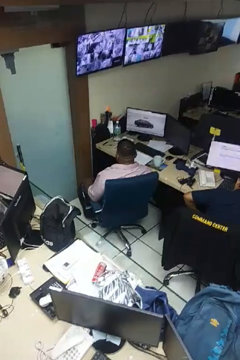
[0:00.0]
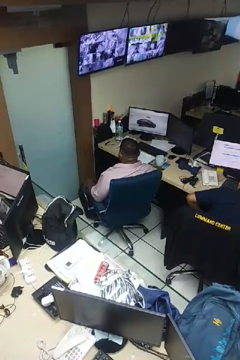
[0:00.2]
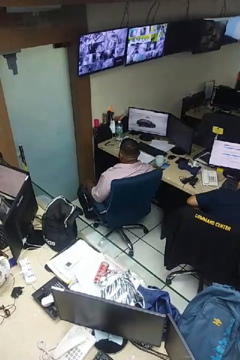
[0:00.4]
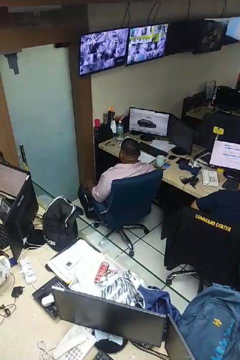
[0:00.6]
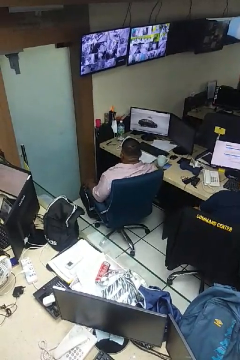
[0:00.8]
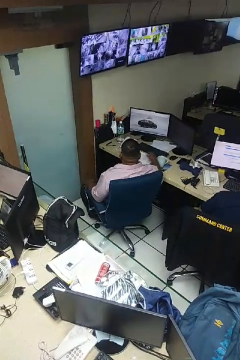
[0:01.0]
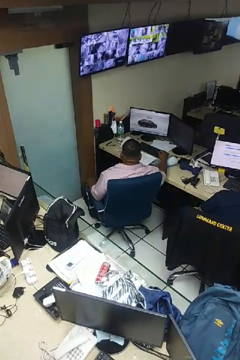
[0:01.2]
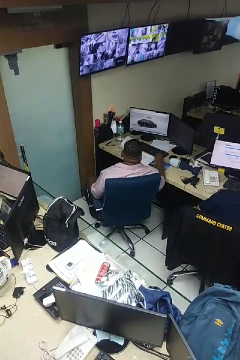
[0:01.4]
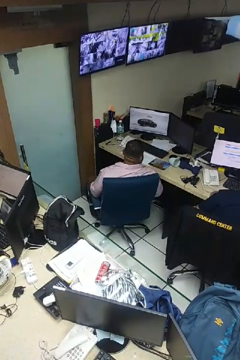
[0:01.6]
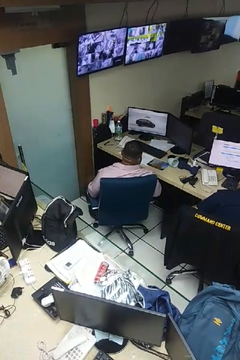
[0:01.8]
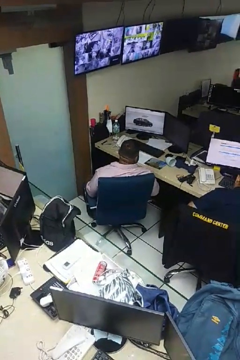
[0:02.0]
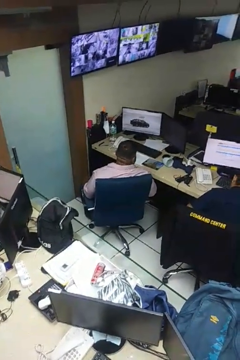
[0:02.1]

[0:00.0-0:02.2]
person knocks over glass

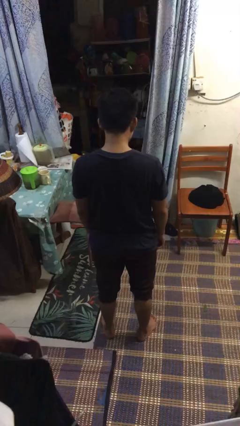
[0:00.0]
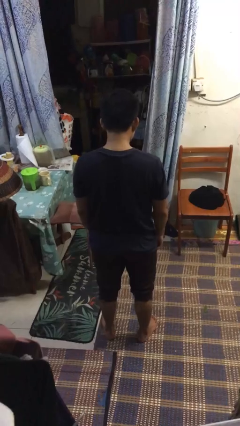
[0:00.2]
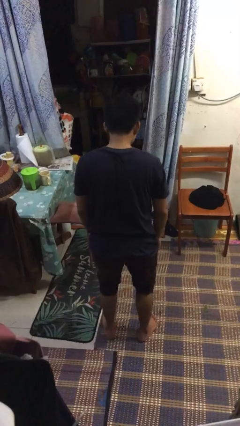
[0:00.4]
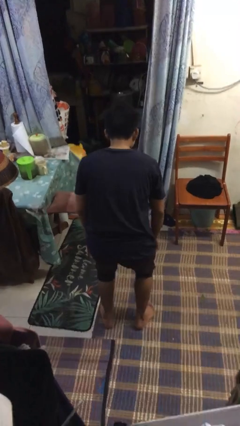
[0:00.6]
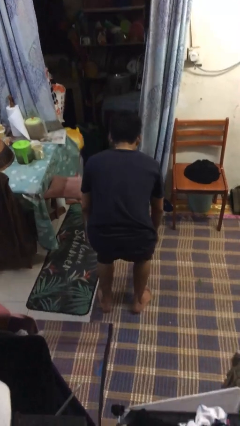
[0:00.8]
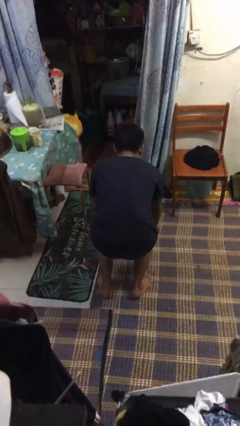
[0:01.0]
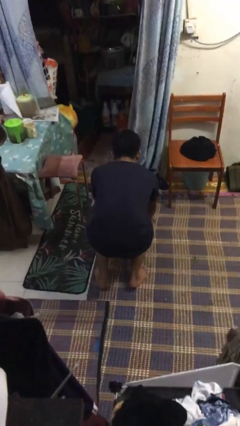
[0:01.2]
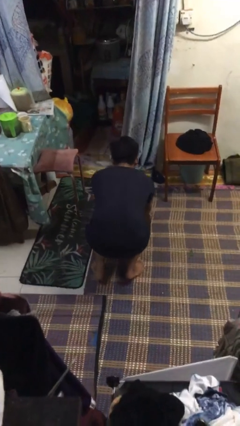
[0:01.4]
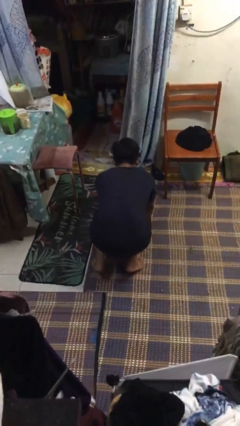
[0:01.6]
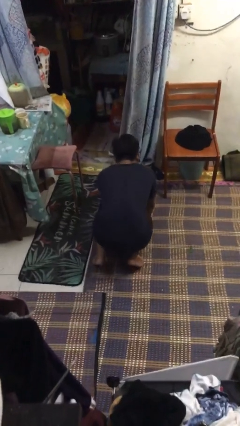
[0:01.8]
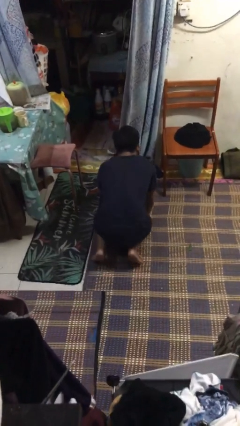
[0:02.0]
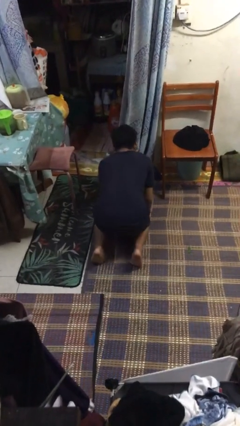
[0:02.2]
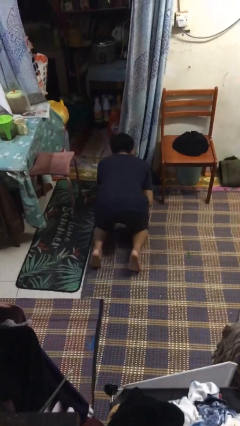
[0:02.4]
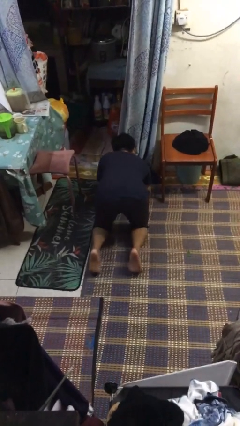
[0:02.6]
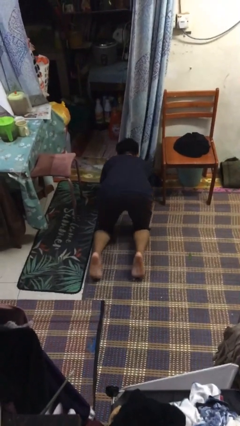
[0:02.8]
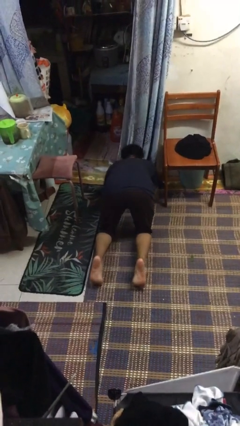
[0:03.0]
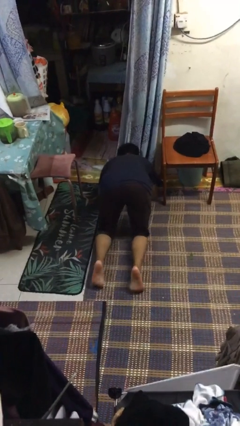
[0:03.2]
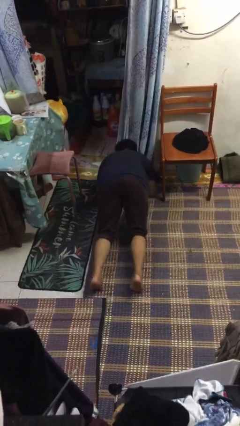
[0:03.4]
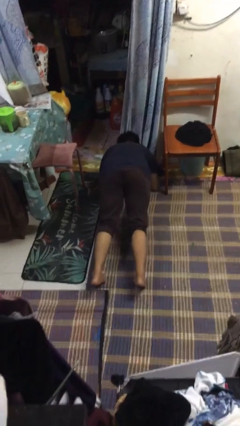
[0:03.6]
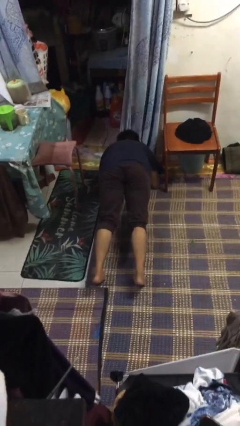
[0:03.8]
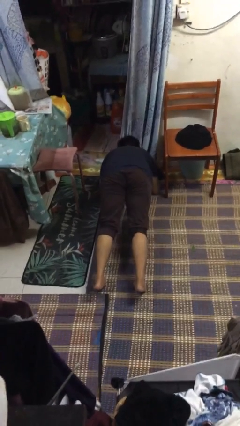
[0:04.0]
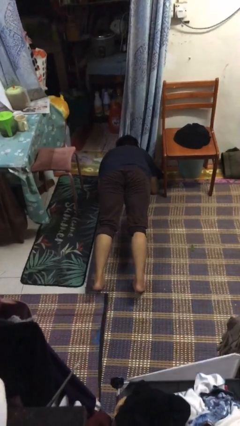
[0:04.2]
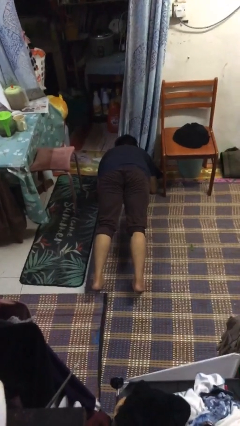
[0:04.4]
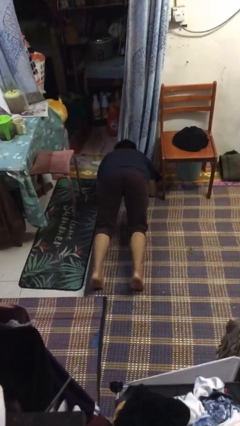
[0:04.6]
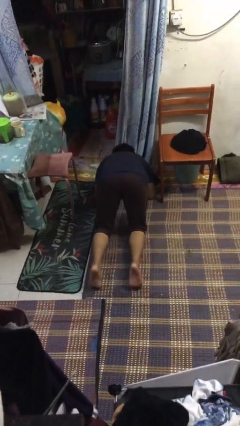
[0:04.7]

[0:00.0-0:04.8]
person exercises with plank

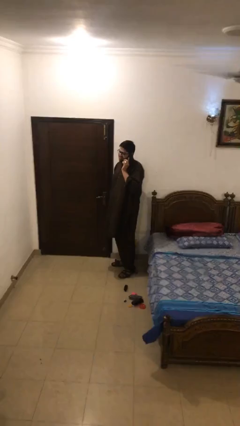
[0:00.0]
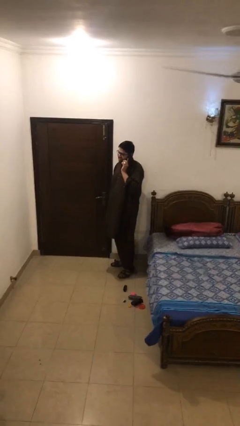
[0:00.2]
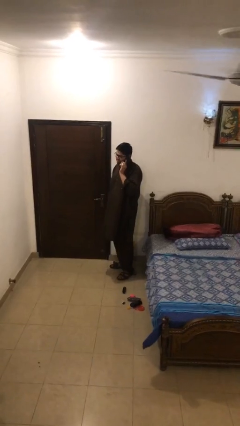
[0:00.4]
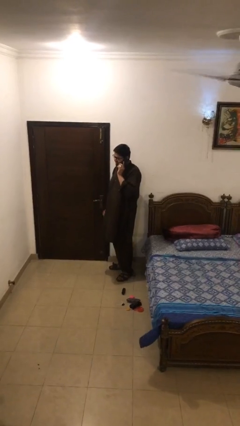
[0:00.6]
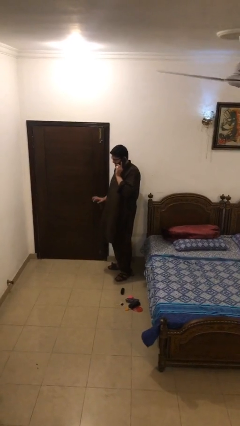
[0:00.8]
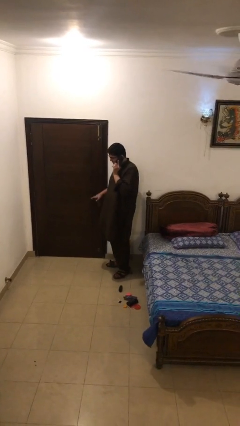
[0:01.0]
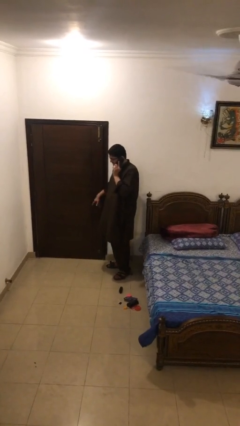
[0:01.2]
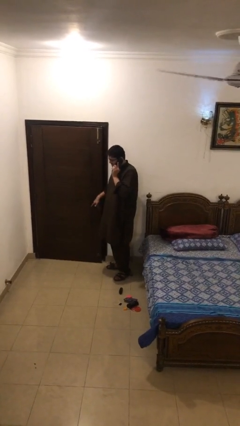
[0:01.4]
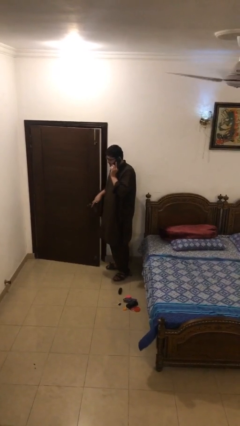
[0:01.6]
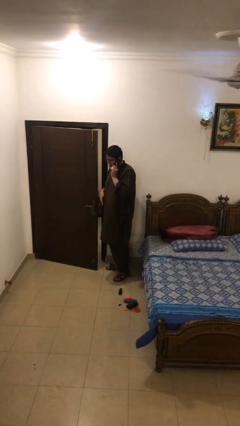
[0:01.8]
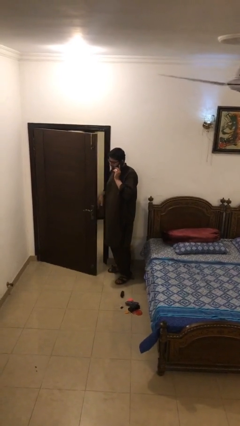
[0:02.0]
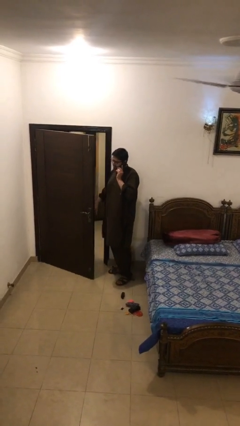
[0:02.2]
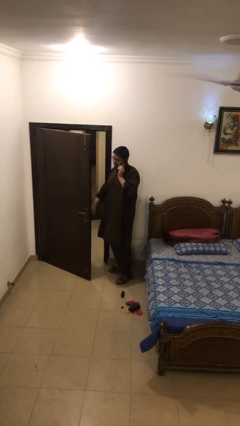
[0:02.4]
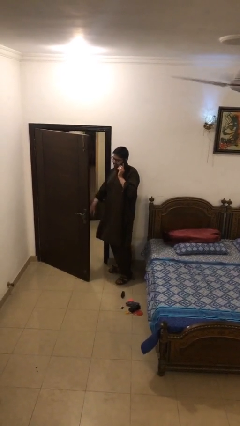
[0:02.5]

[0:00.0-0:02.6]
person opens facility door

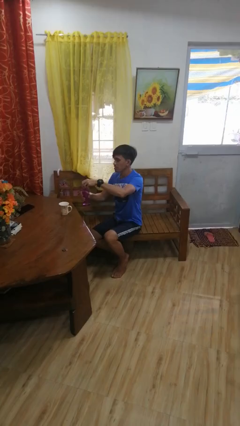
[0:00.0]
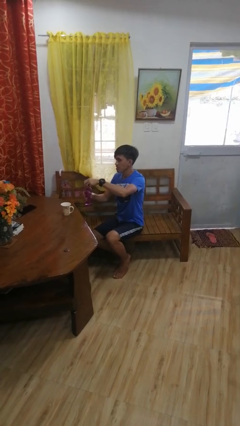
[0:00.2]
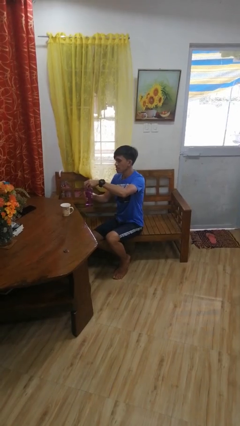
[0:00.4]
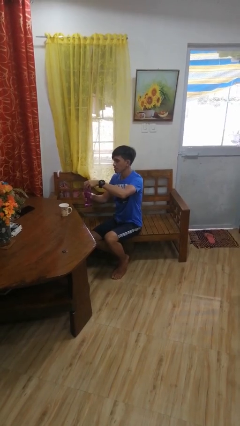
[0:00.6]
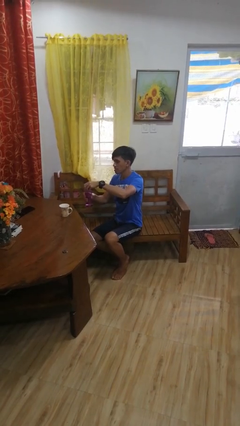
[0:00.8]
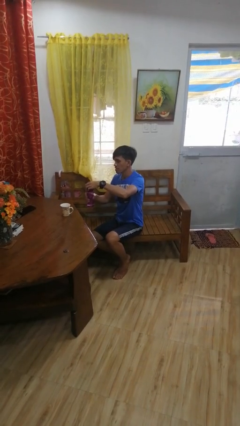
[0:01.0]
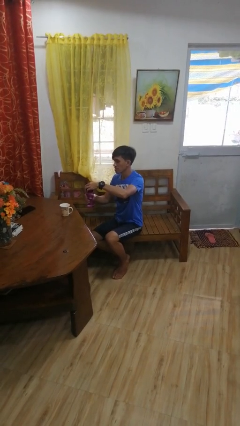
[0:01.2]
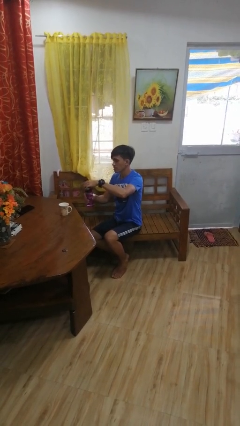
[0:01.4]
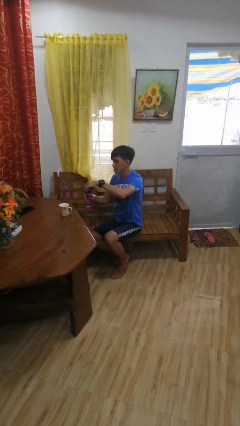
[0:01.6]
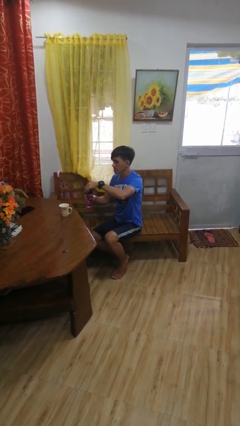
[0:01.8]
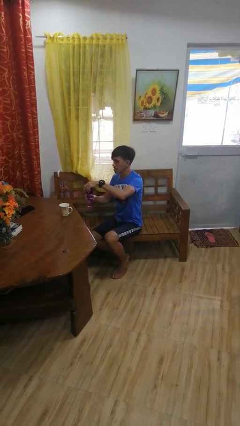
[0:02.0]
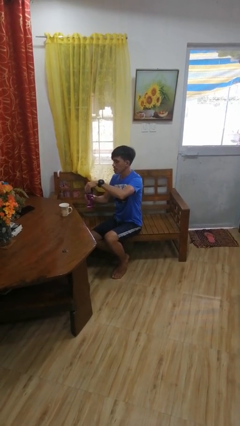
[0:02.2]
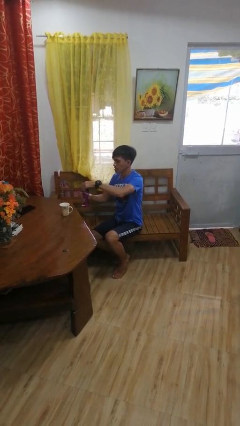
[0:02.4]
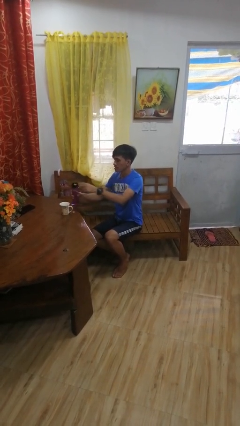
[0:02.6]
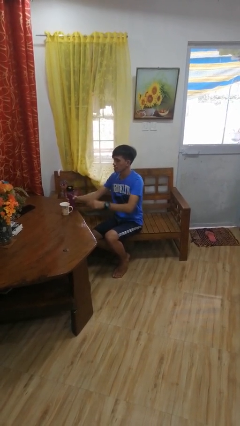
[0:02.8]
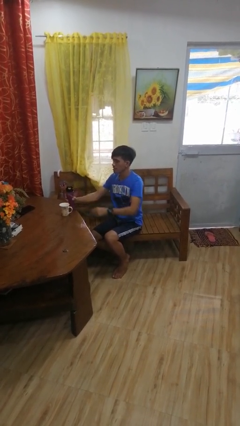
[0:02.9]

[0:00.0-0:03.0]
person screws lid to bottle

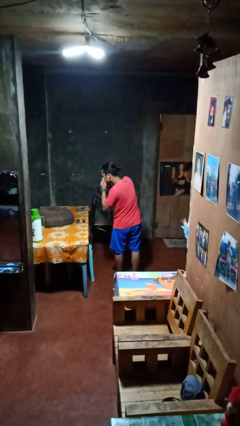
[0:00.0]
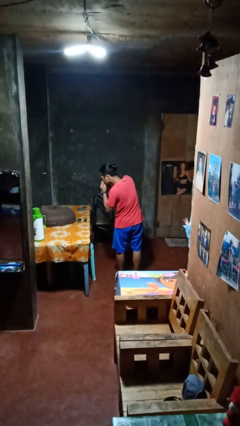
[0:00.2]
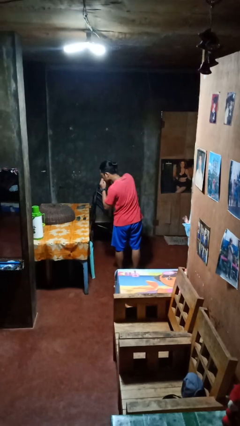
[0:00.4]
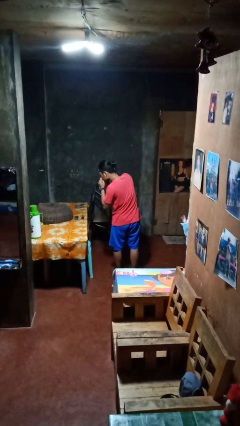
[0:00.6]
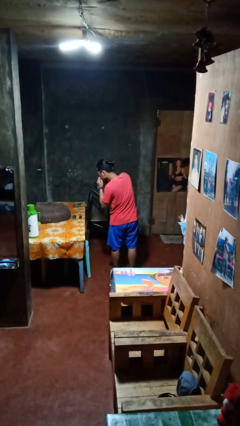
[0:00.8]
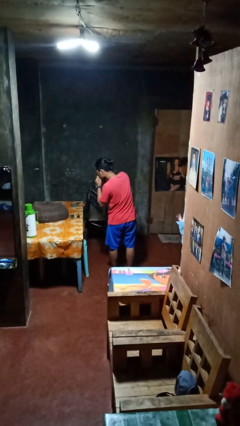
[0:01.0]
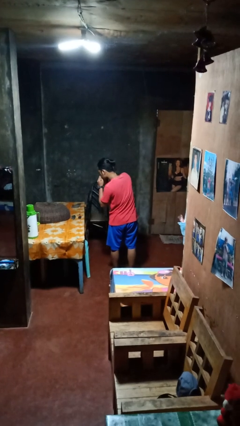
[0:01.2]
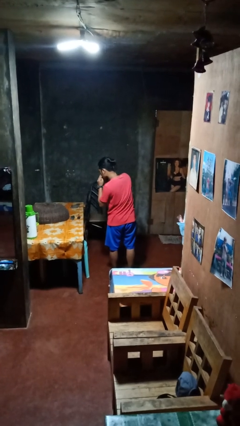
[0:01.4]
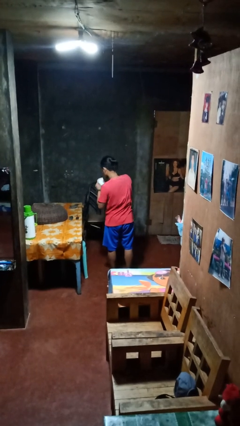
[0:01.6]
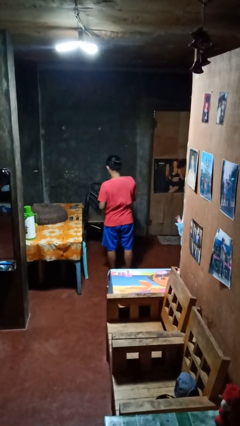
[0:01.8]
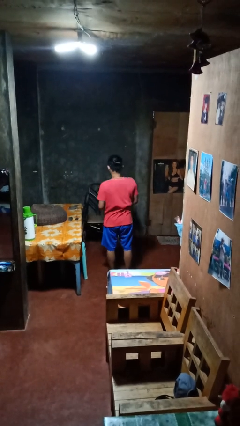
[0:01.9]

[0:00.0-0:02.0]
person blows nose

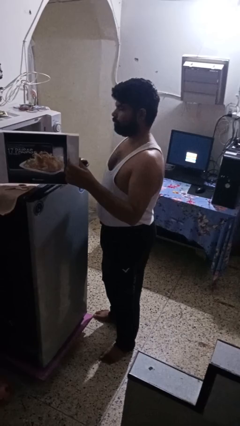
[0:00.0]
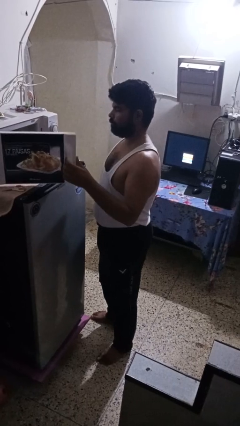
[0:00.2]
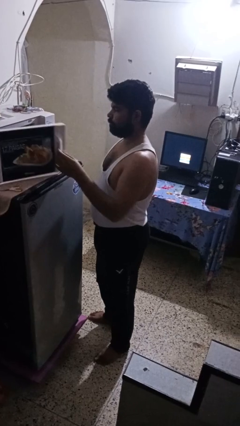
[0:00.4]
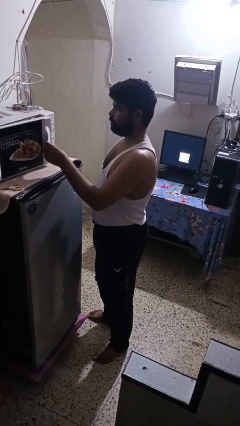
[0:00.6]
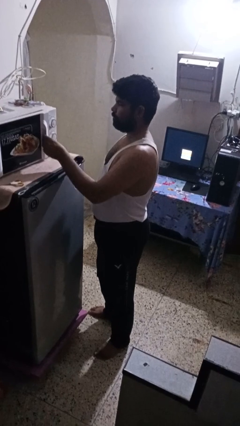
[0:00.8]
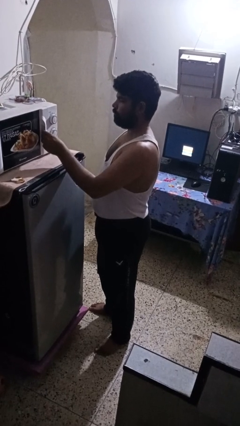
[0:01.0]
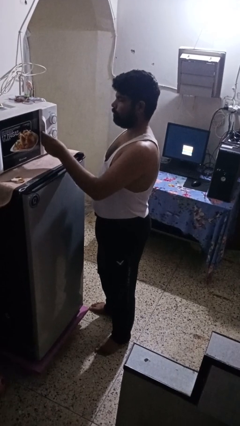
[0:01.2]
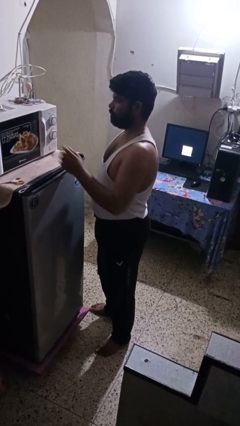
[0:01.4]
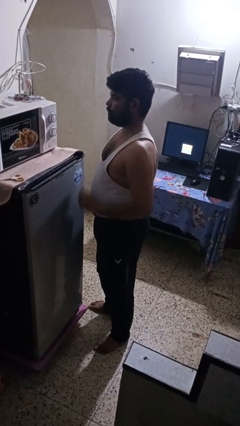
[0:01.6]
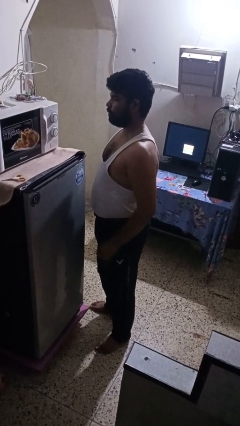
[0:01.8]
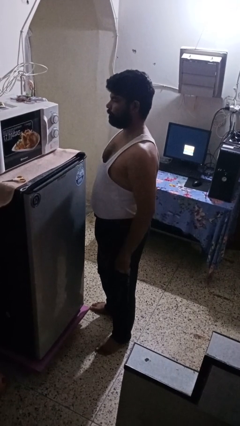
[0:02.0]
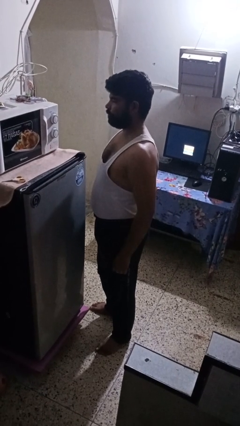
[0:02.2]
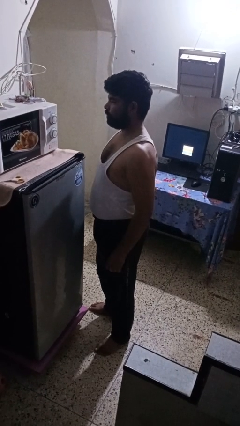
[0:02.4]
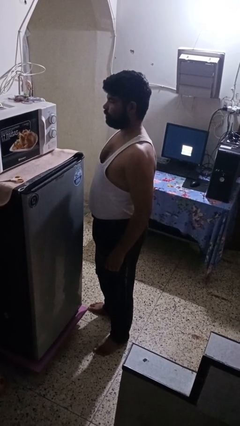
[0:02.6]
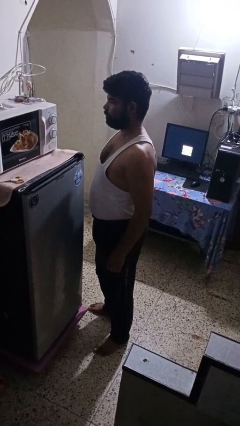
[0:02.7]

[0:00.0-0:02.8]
person closes microwave
